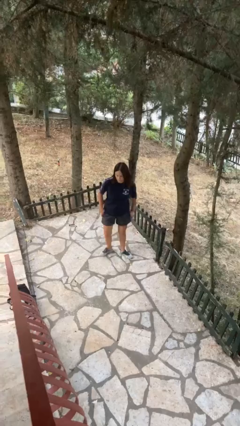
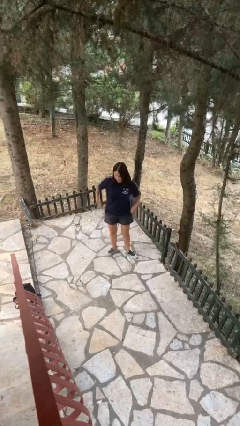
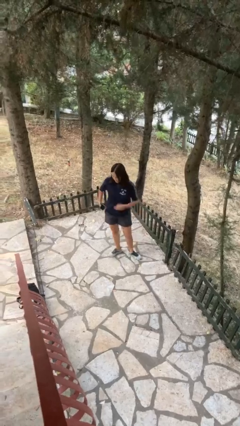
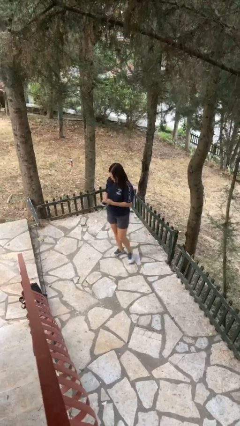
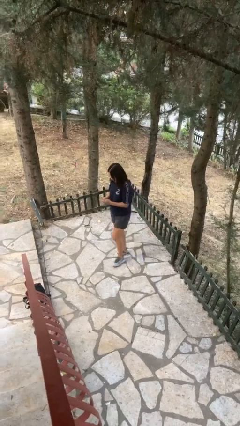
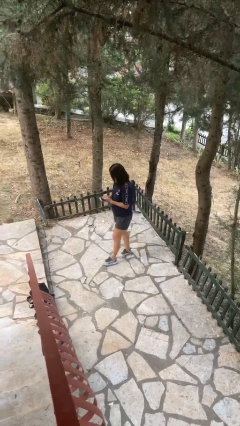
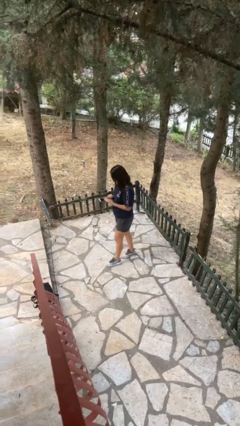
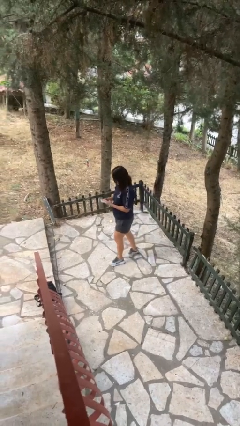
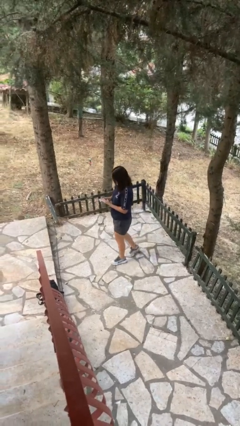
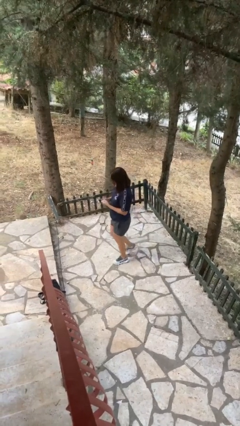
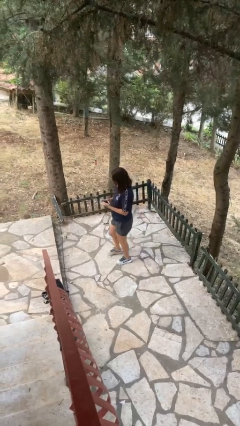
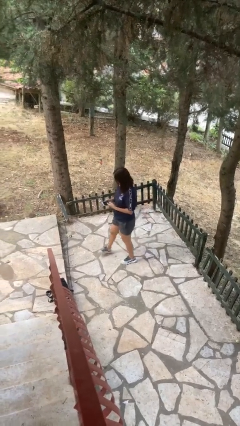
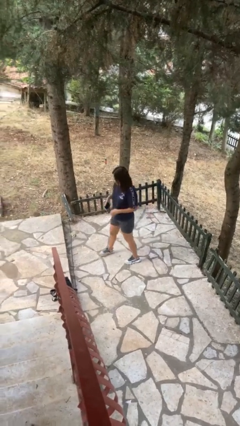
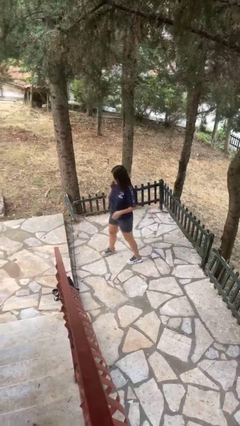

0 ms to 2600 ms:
person takes phone from pocket

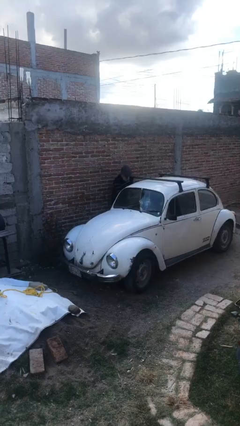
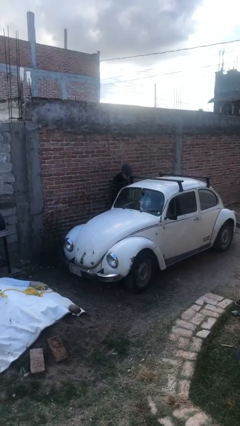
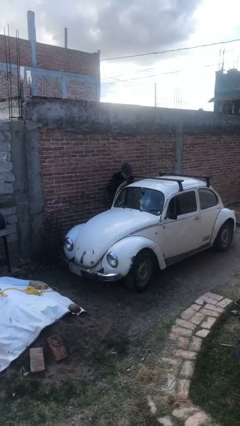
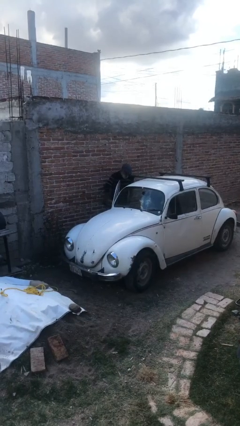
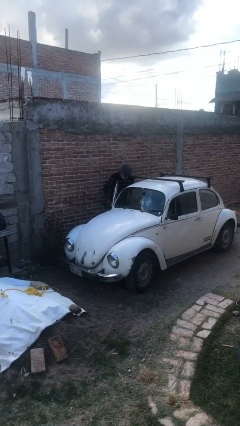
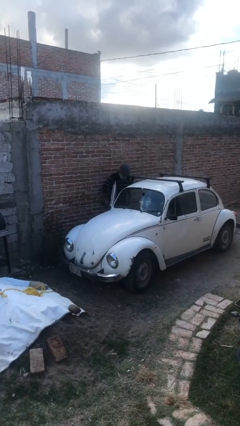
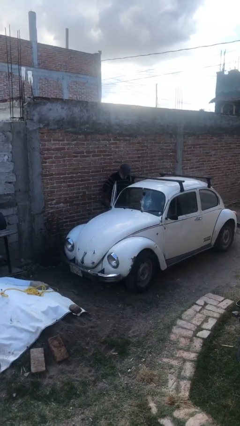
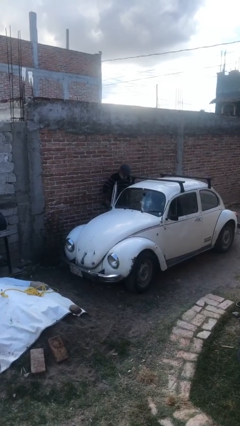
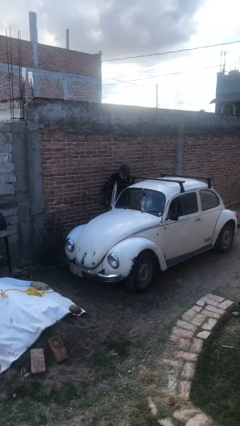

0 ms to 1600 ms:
person opens car door

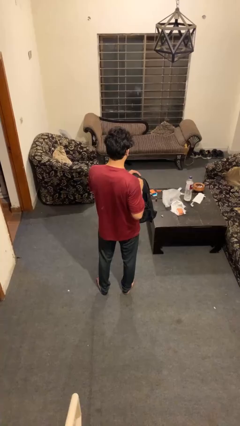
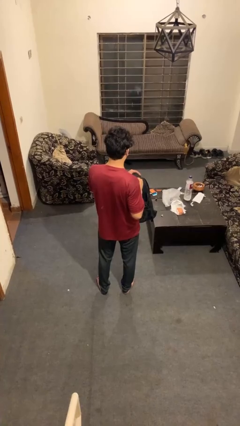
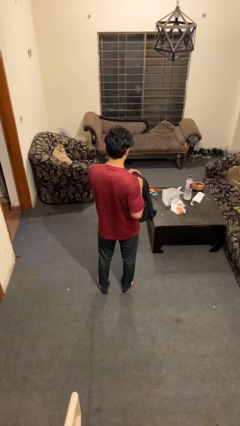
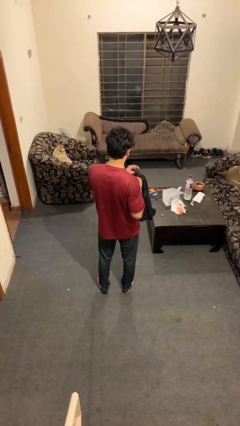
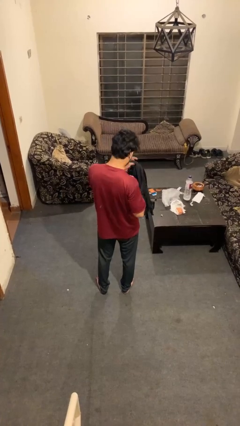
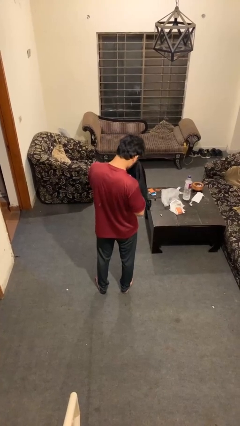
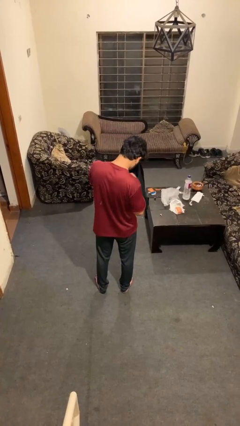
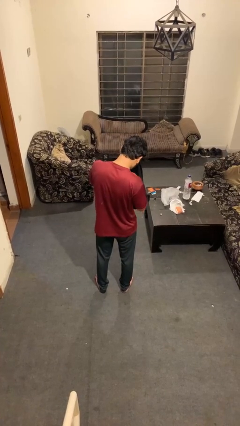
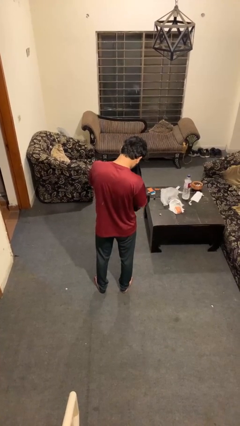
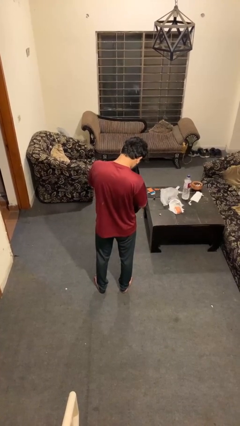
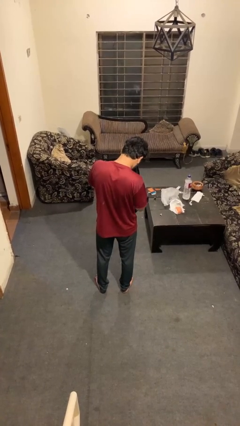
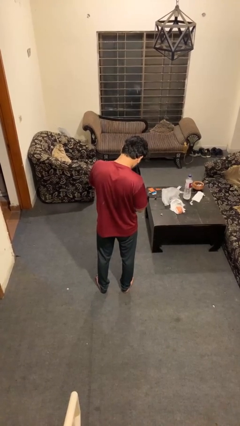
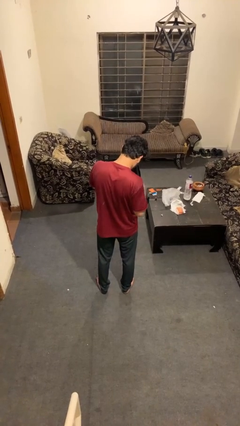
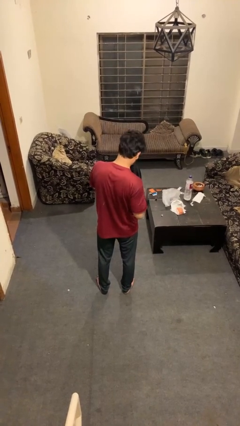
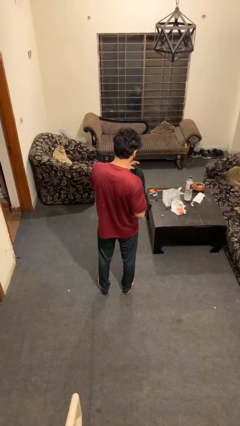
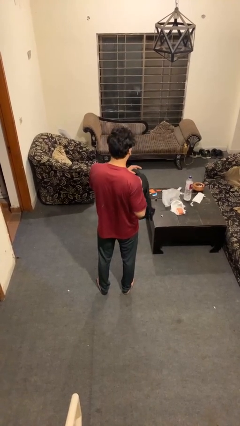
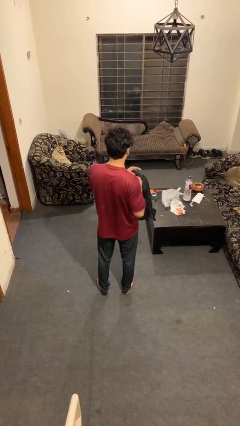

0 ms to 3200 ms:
person searches in bag

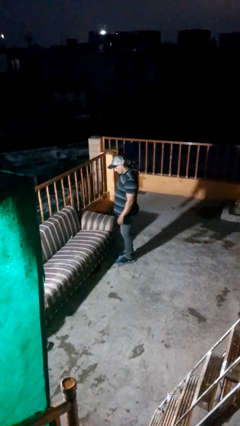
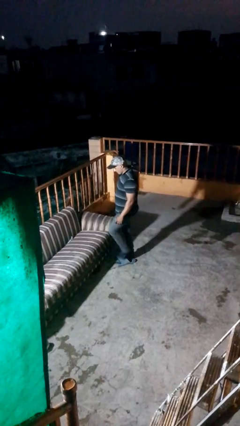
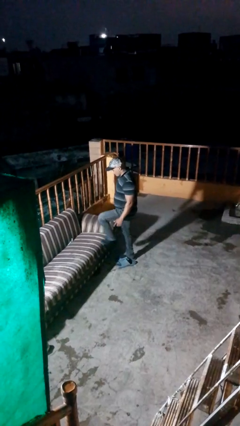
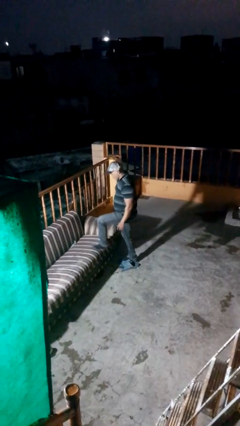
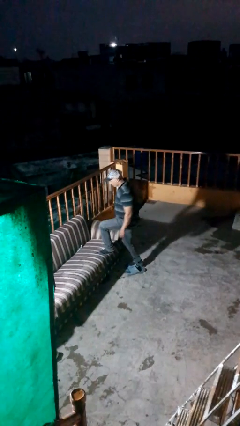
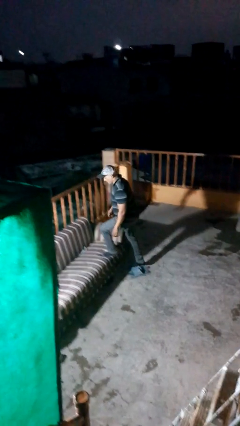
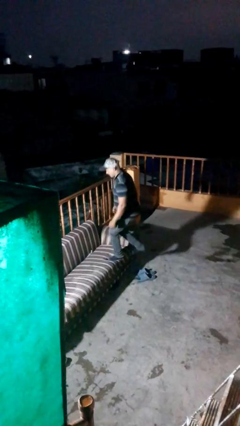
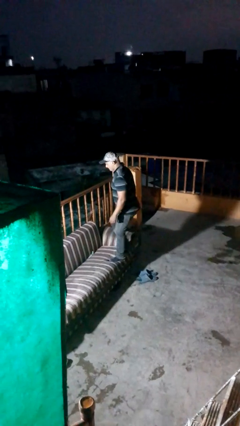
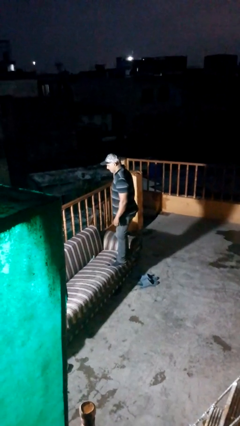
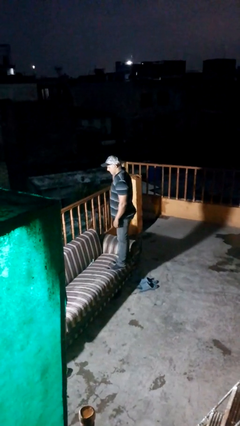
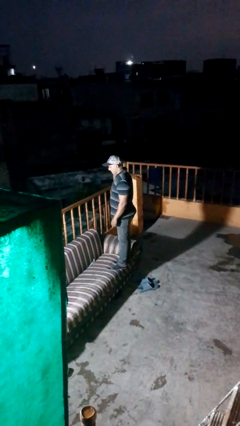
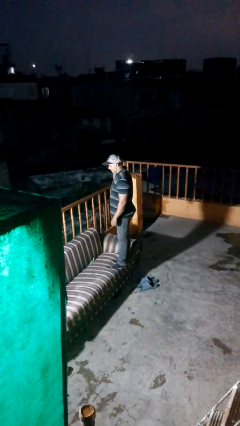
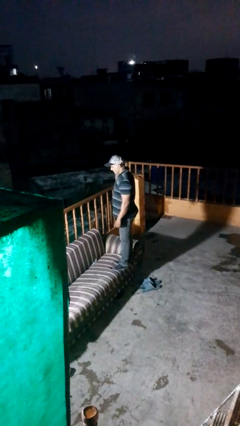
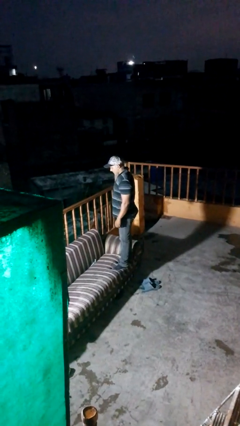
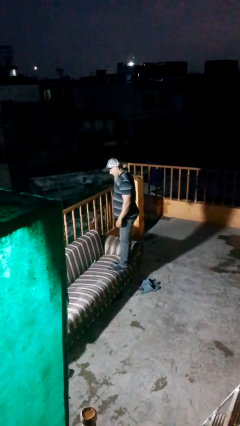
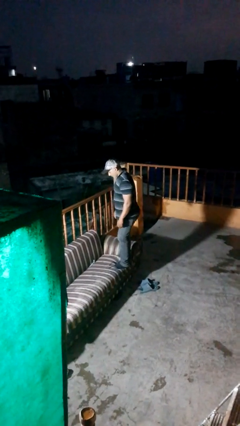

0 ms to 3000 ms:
person climbs on couch

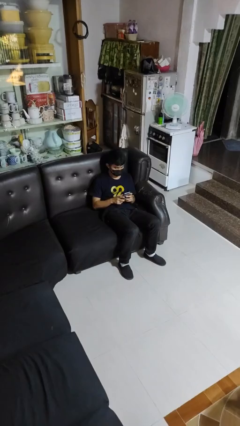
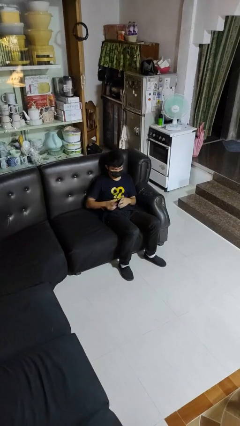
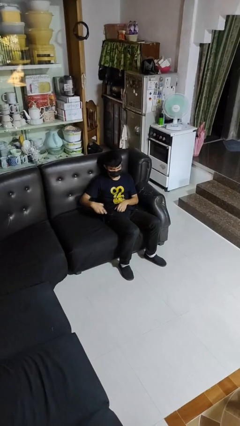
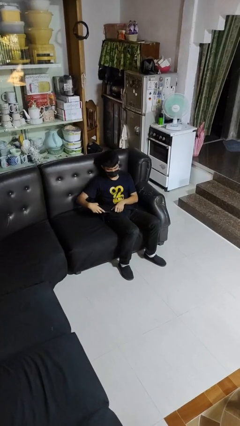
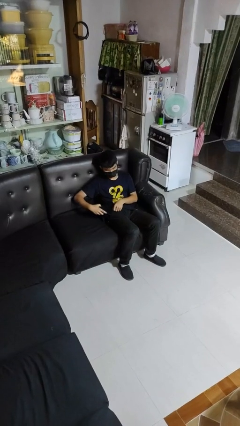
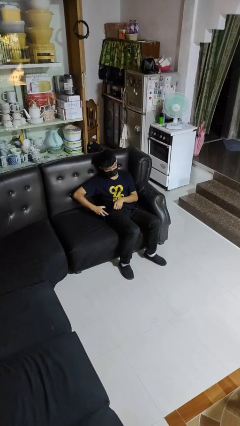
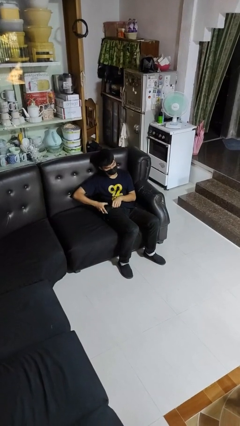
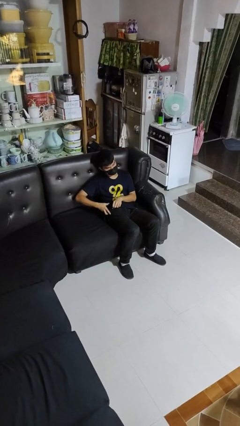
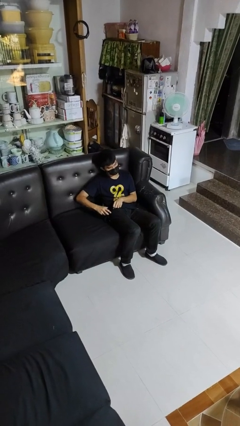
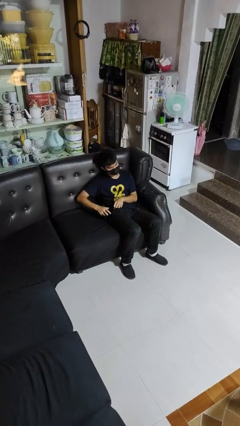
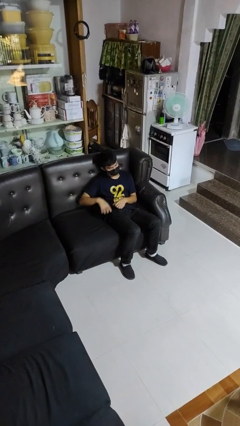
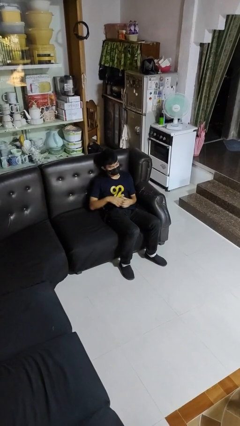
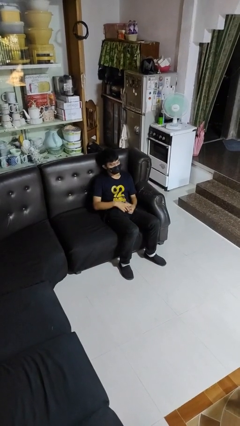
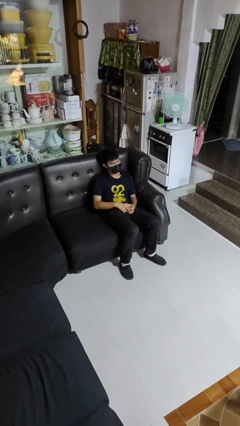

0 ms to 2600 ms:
person puts phone into pocket

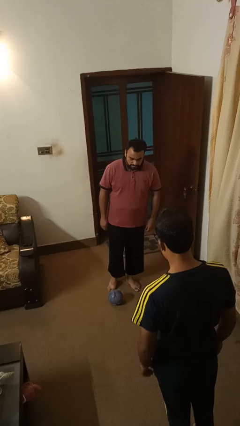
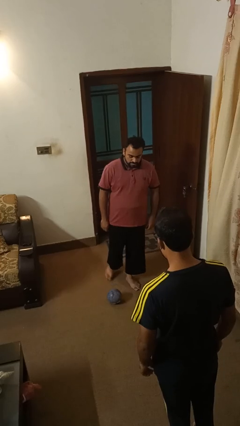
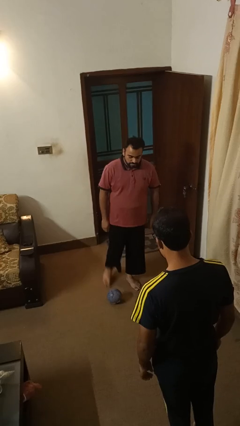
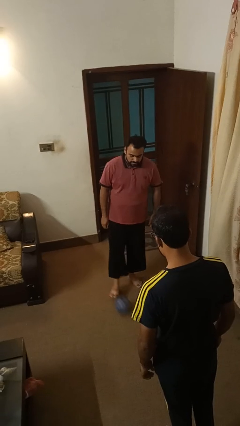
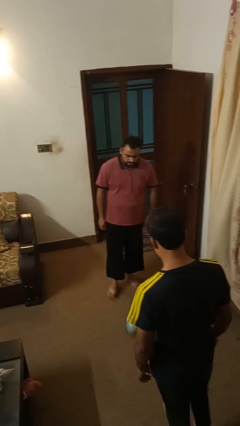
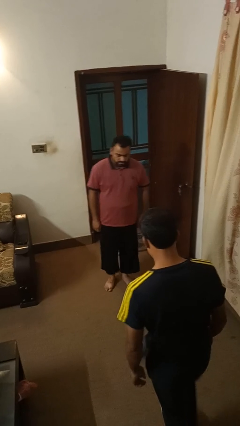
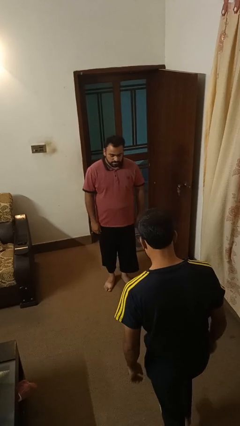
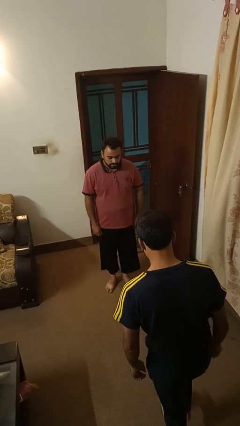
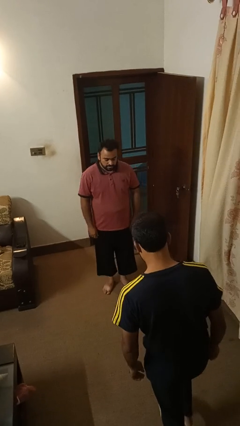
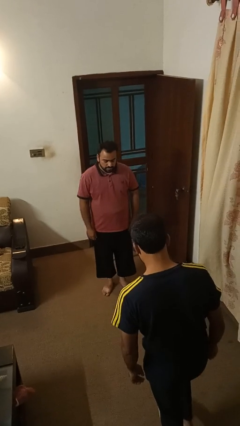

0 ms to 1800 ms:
person kicks object to person

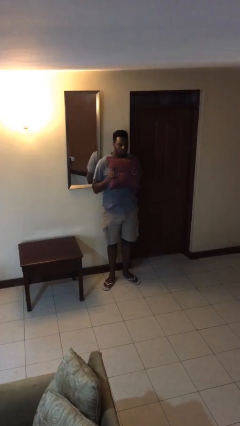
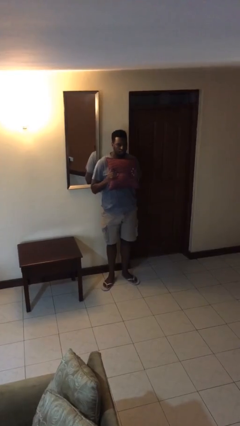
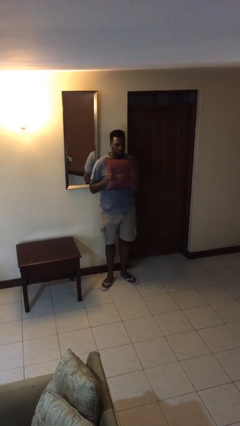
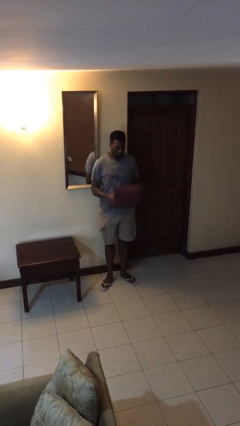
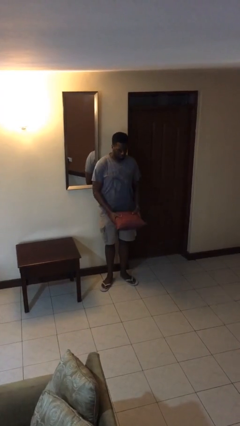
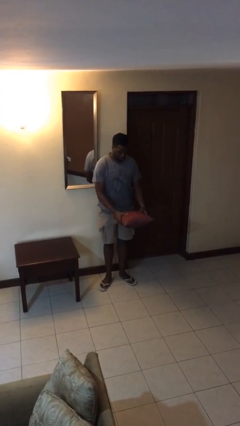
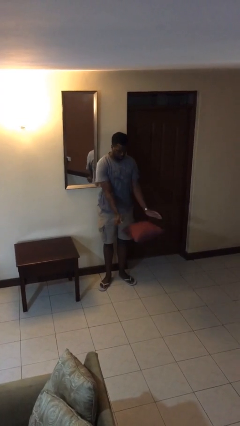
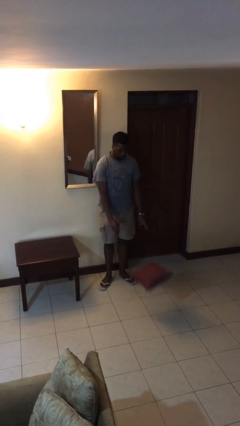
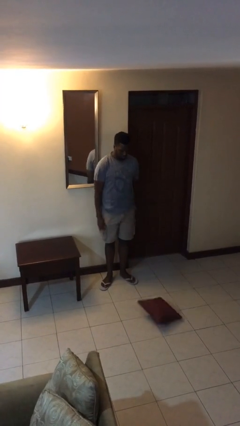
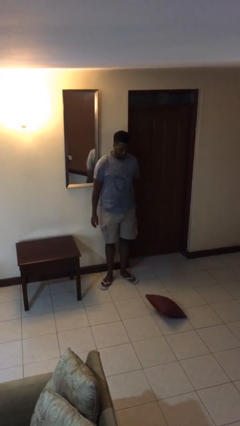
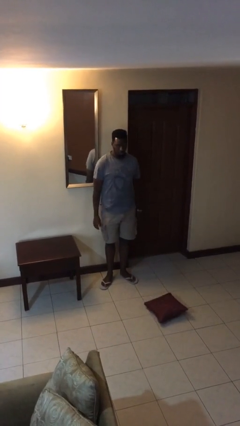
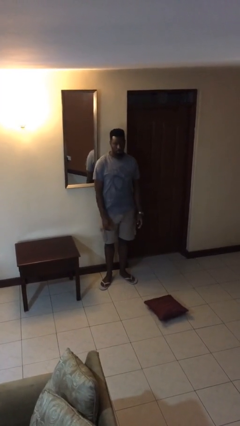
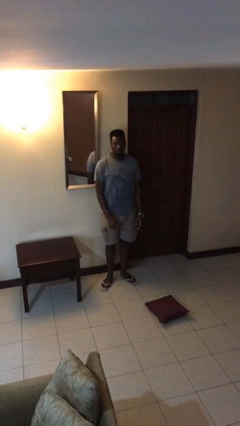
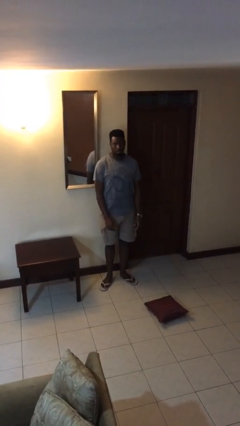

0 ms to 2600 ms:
person throws object to ground
